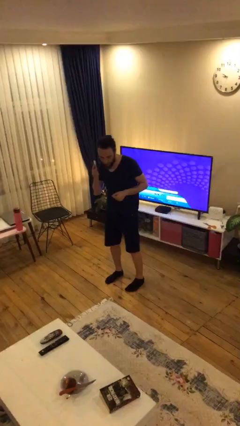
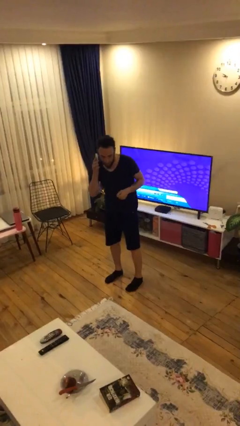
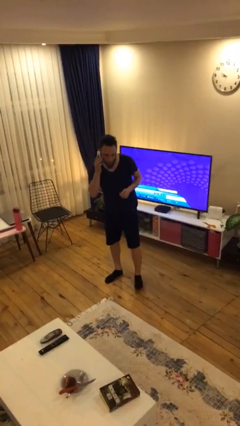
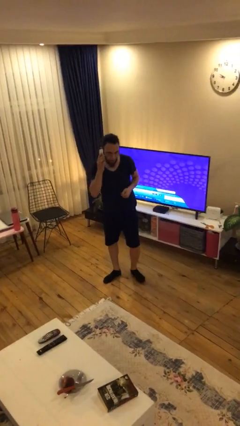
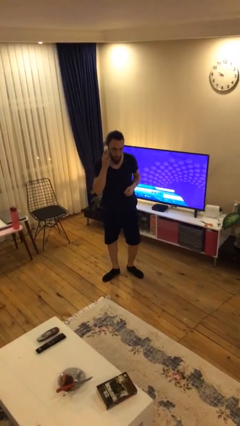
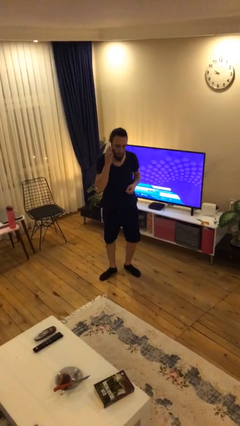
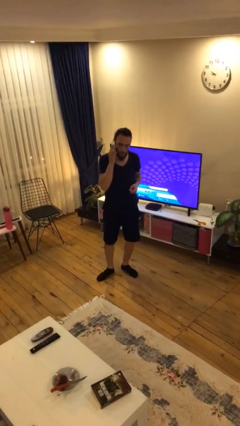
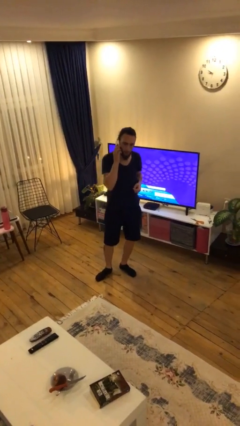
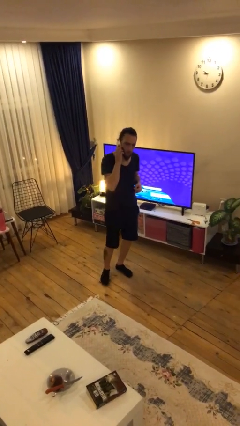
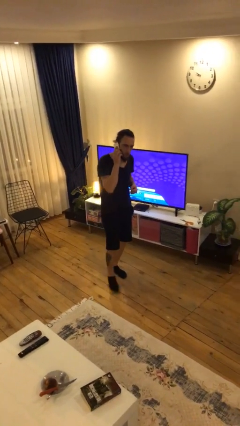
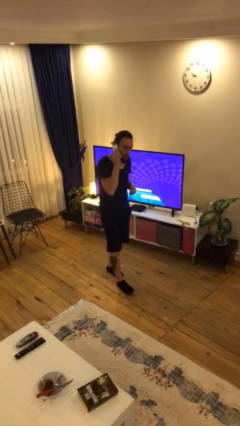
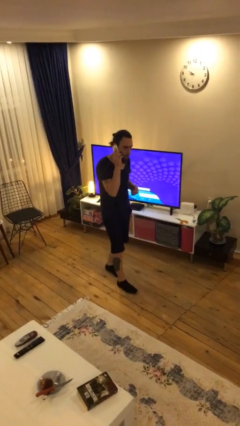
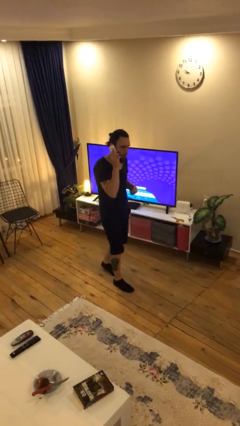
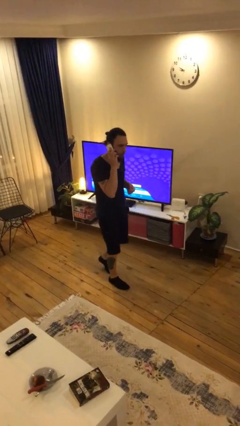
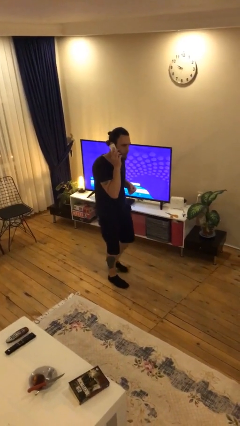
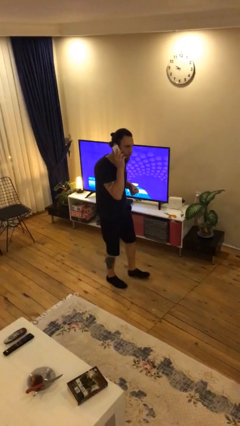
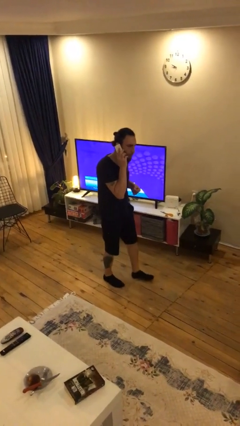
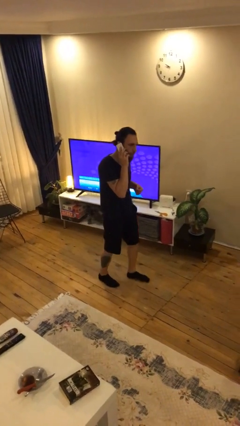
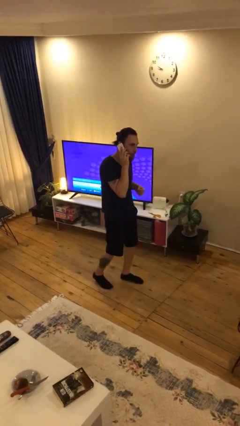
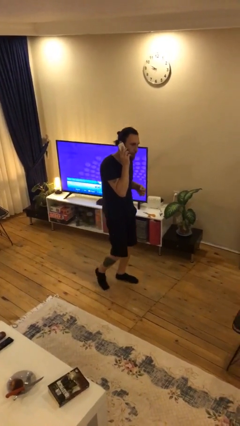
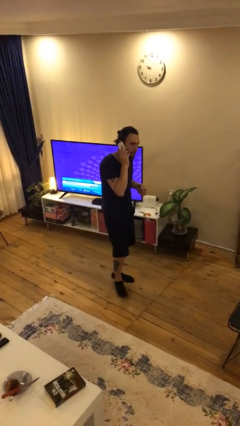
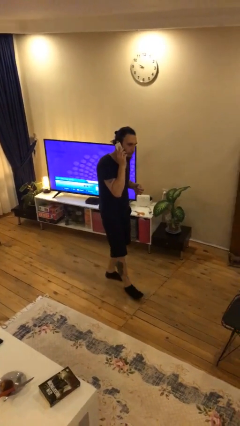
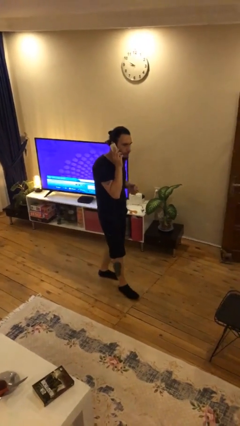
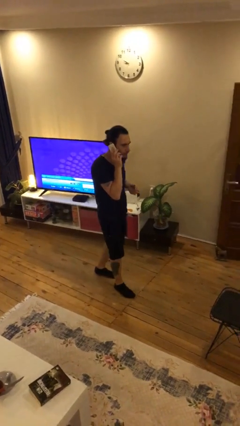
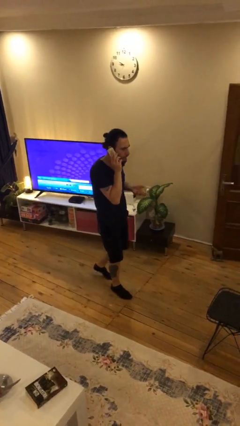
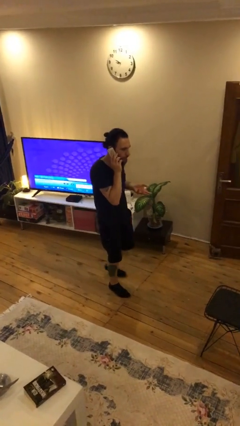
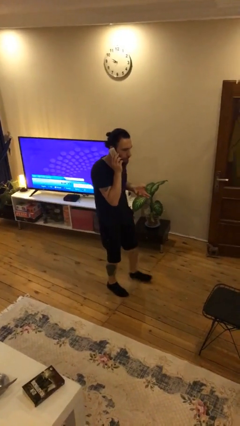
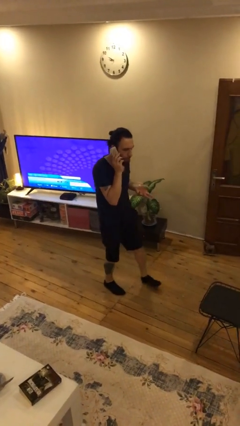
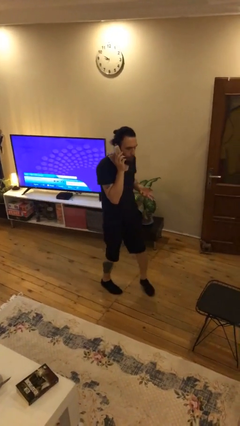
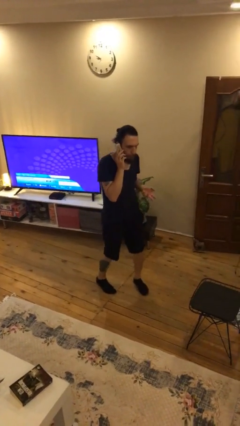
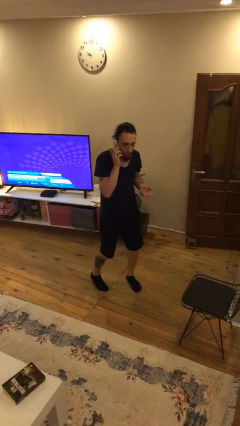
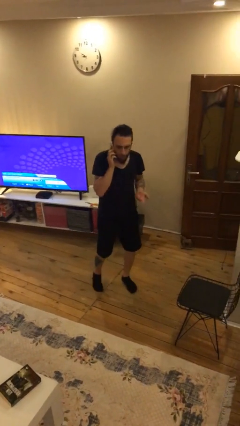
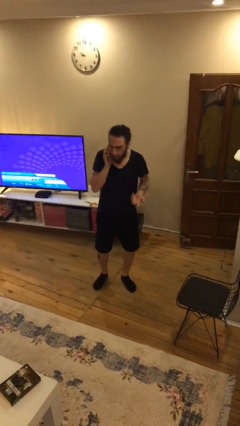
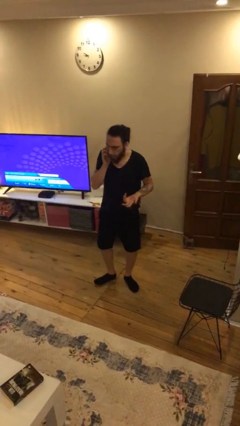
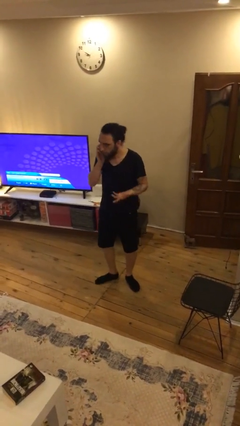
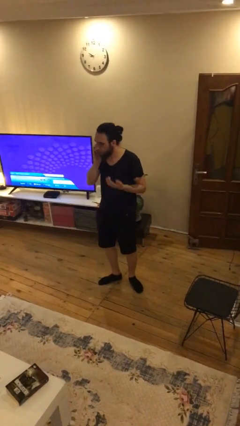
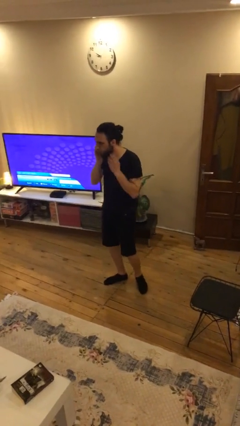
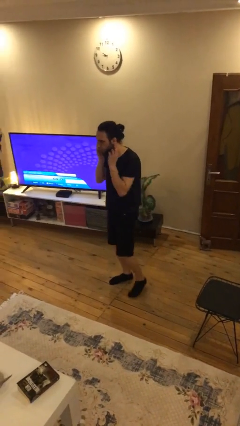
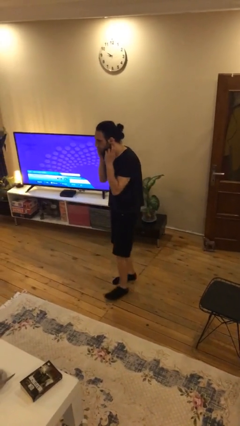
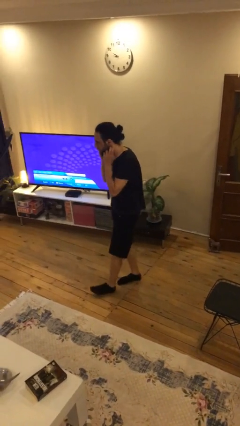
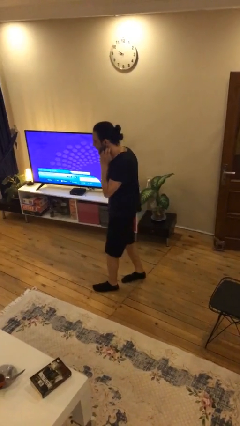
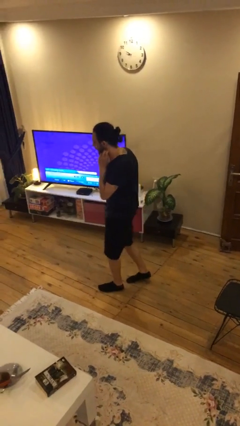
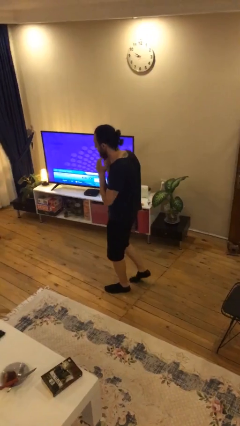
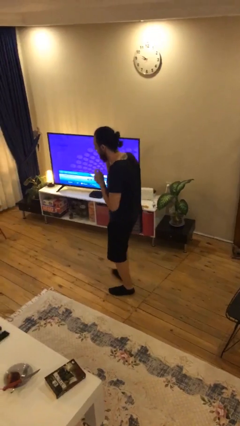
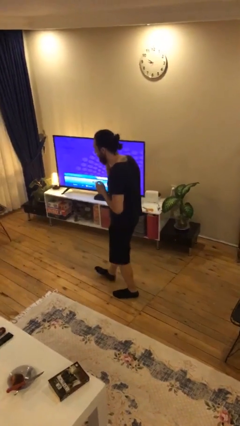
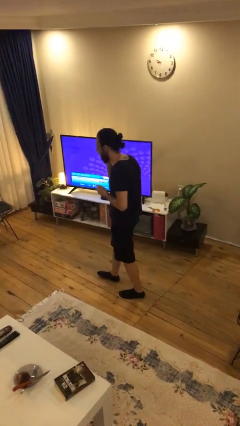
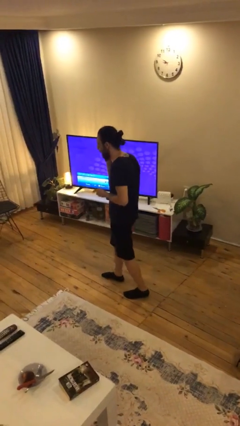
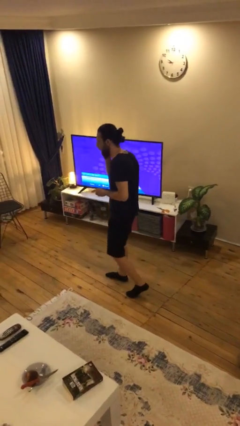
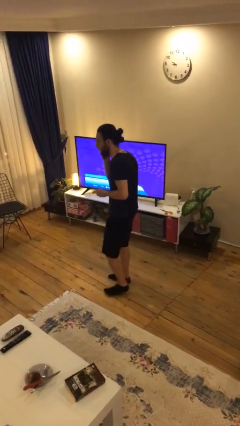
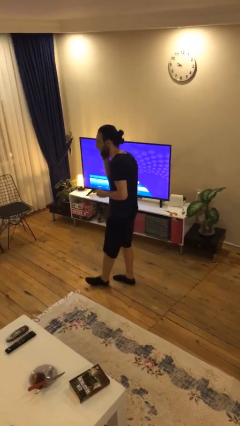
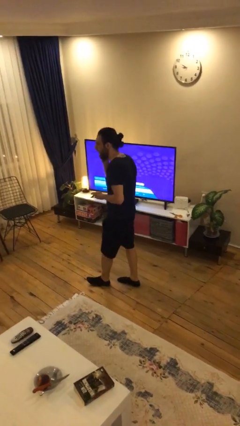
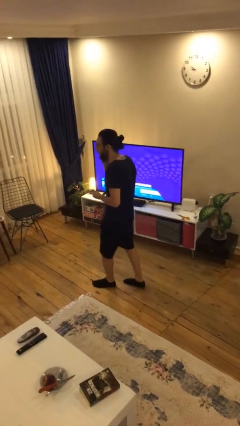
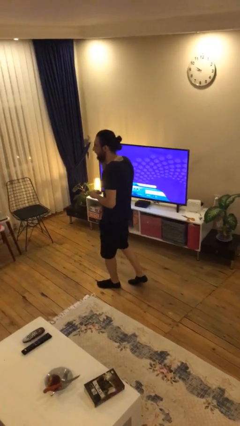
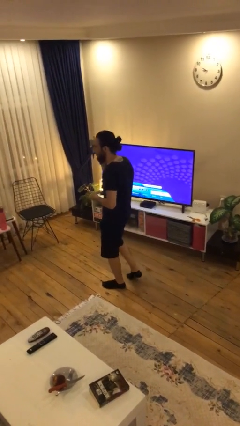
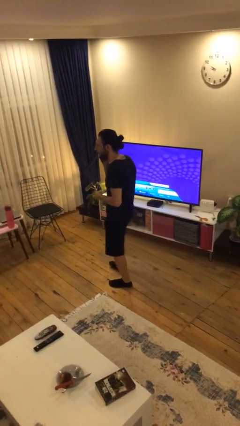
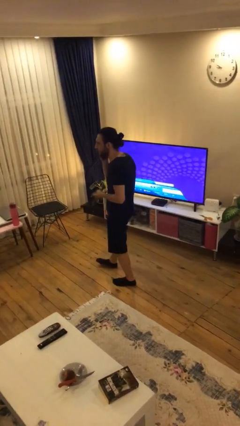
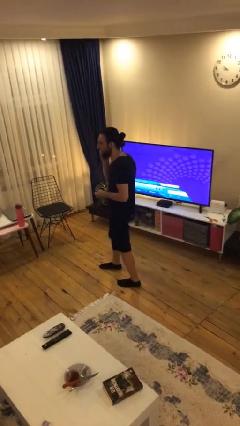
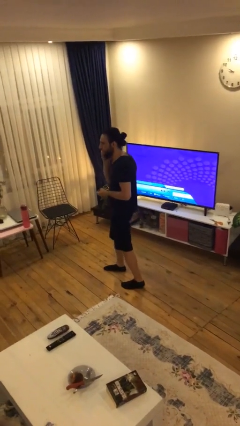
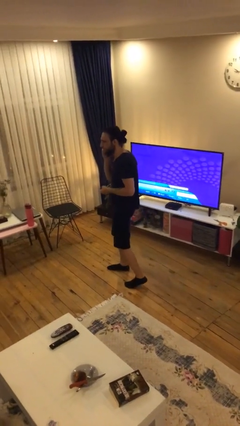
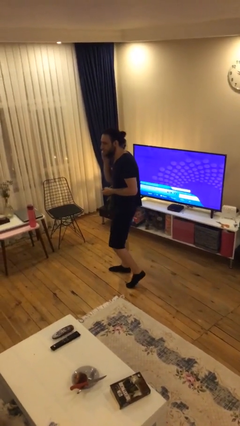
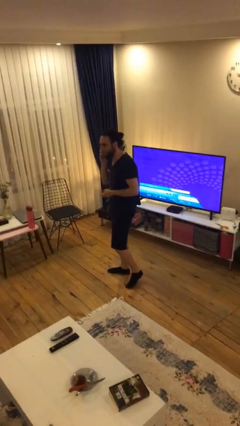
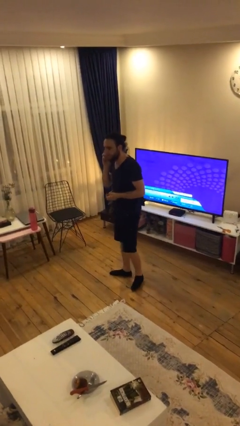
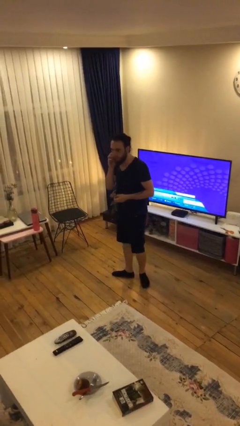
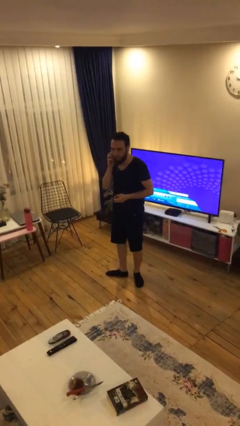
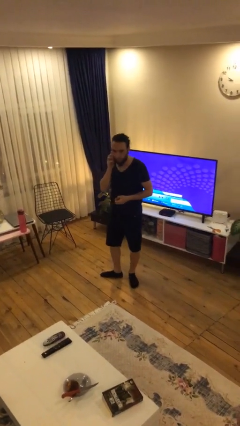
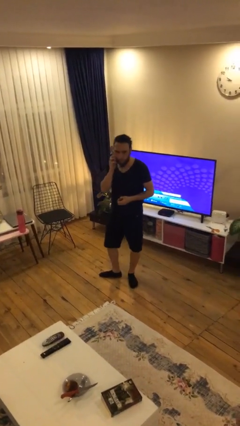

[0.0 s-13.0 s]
person talks on phone

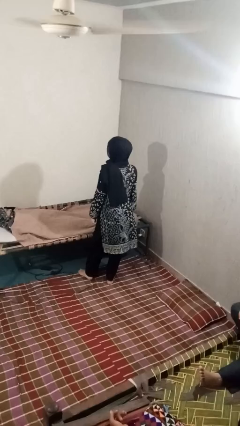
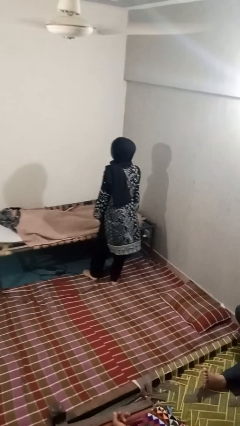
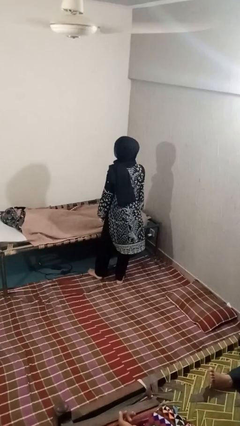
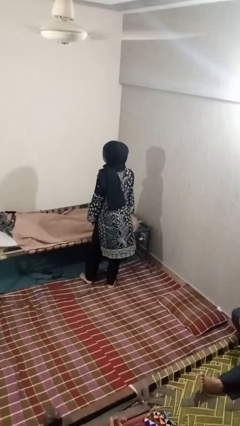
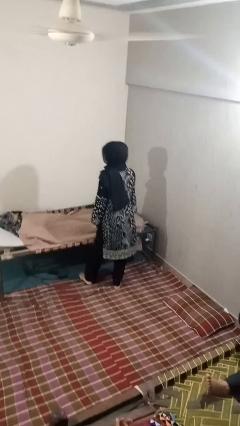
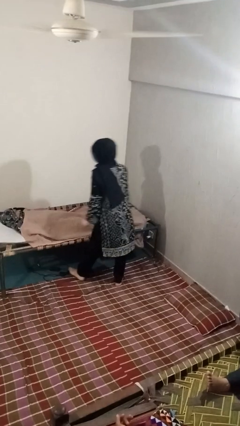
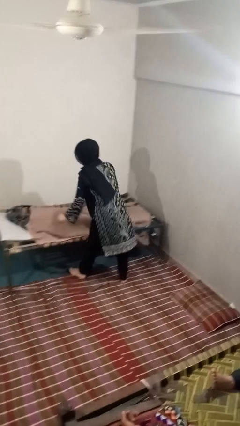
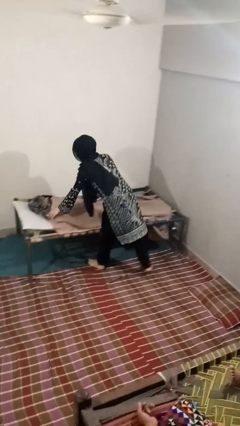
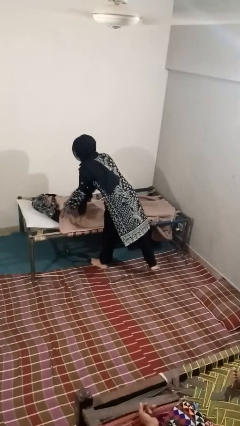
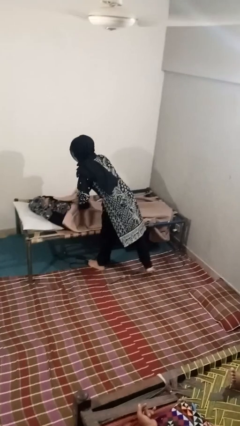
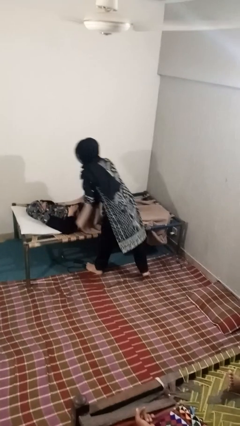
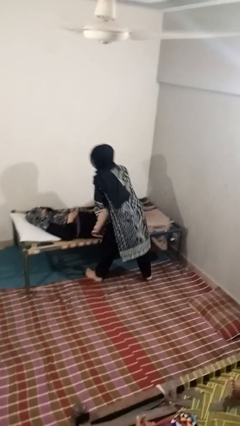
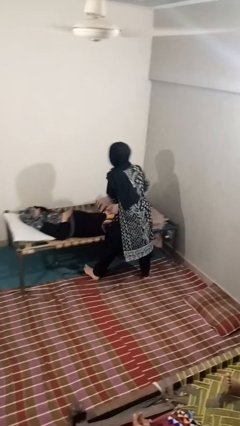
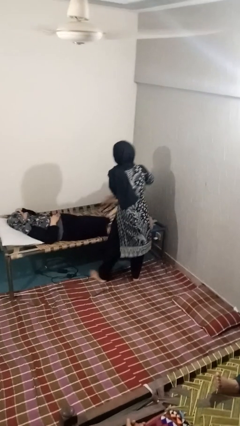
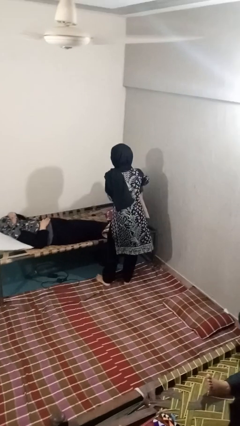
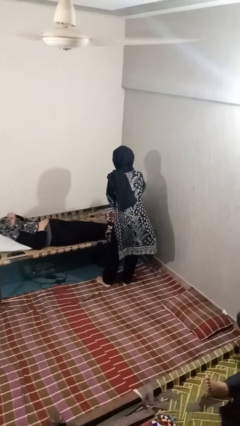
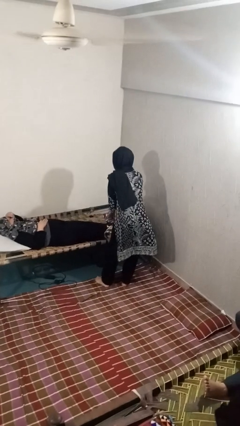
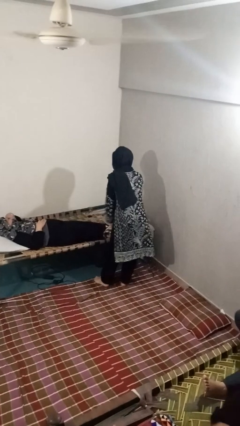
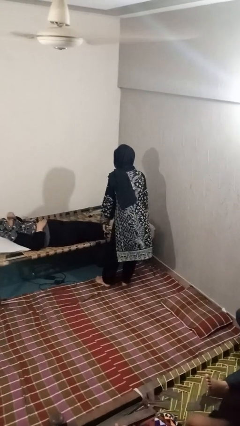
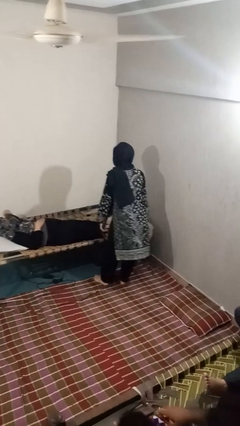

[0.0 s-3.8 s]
person uncovers friend with blanket

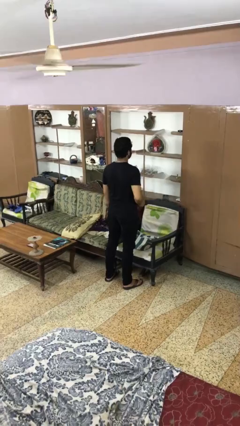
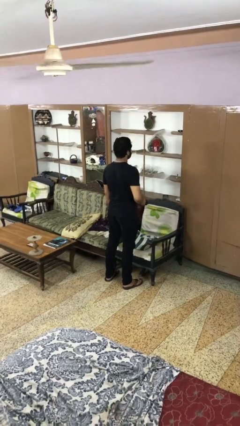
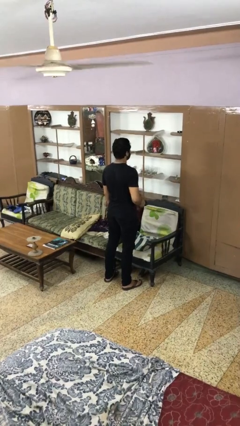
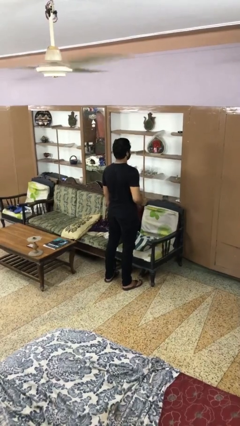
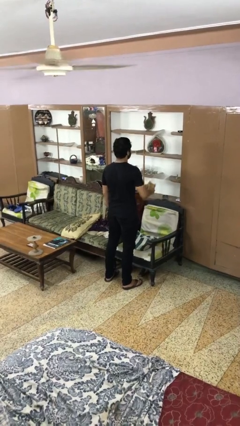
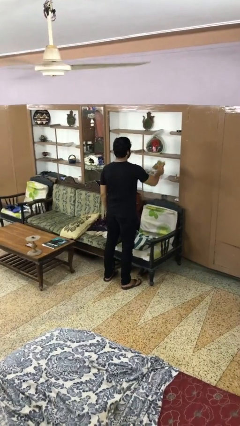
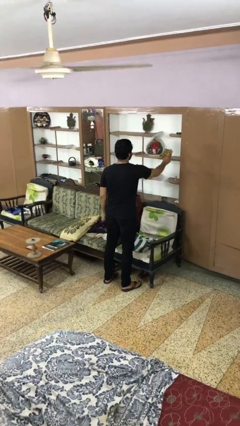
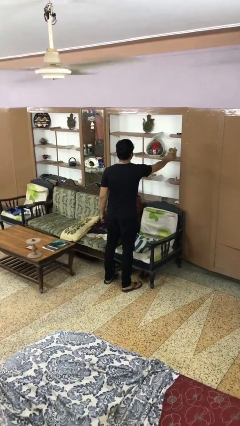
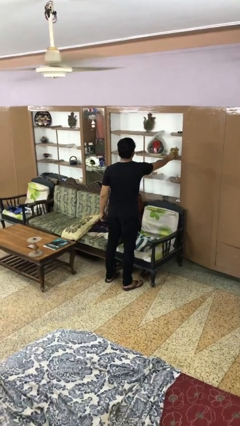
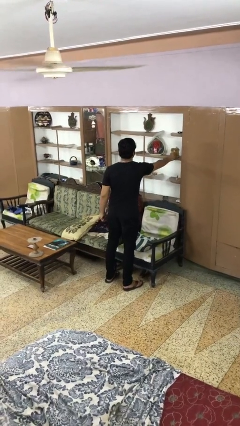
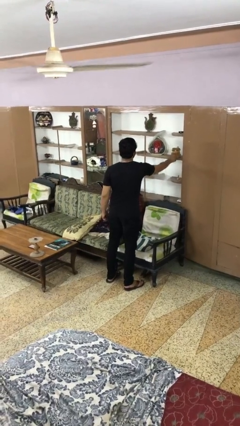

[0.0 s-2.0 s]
person puts down object on shelf
